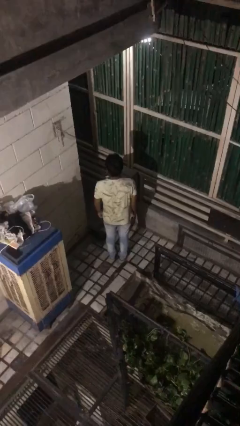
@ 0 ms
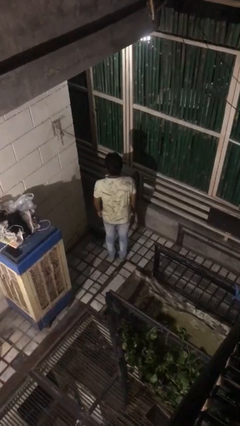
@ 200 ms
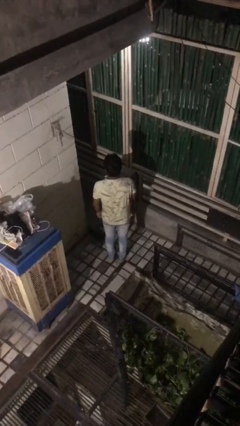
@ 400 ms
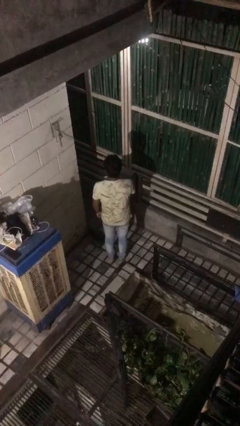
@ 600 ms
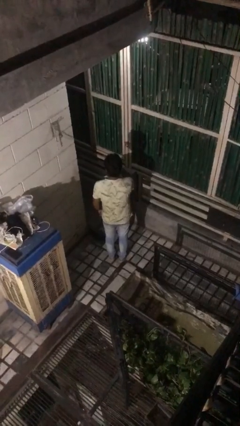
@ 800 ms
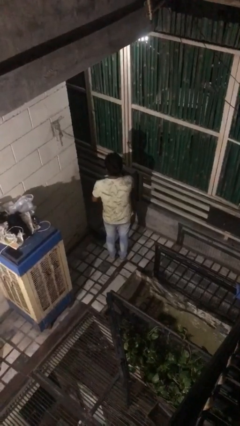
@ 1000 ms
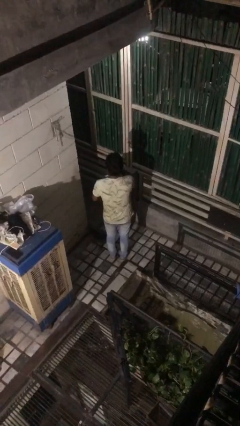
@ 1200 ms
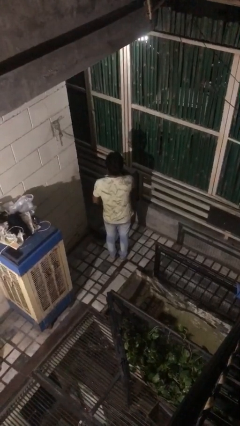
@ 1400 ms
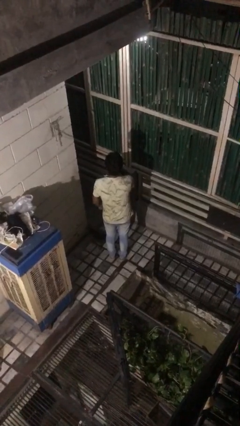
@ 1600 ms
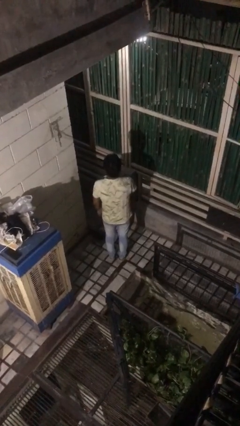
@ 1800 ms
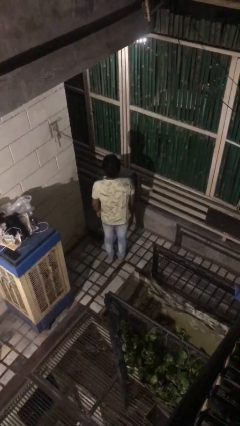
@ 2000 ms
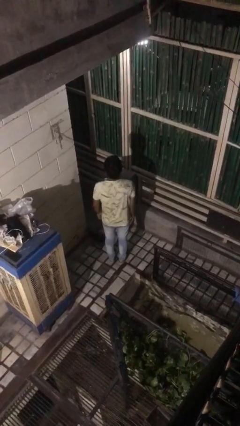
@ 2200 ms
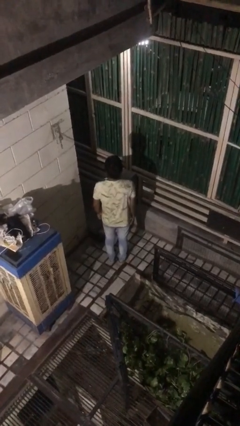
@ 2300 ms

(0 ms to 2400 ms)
person gestures be quiet

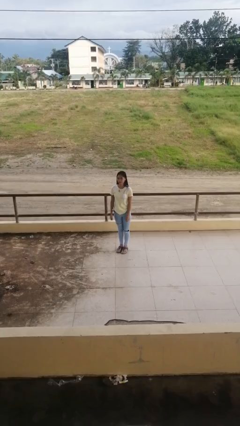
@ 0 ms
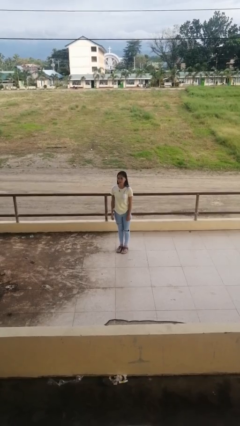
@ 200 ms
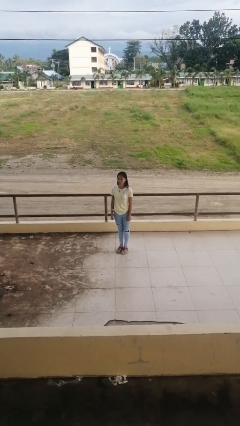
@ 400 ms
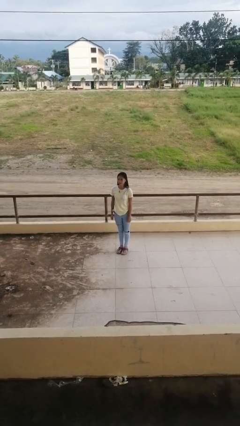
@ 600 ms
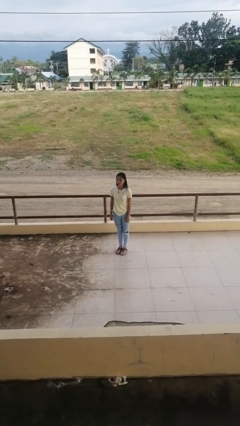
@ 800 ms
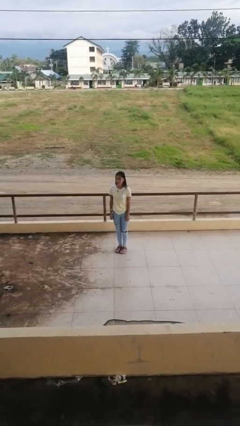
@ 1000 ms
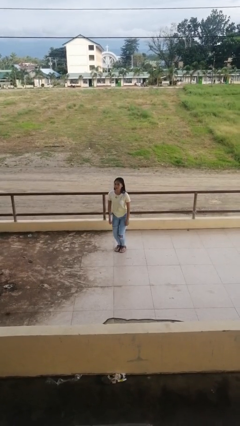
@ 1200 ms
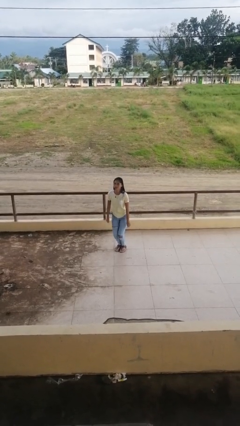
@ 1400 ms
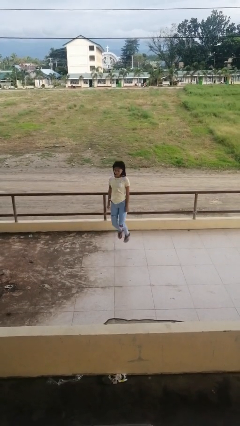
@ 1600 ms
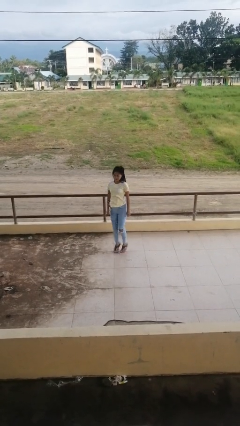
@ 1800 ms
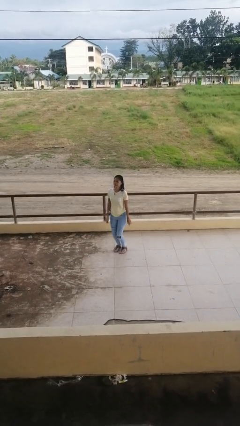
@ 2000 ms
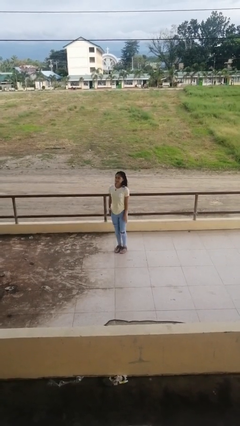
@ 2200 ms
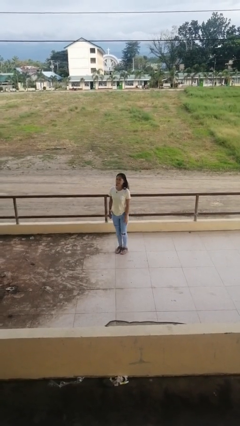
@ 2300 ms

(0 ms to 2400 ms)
person jumps

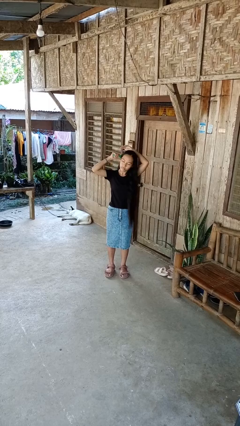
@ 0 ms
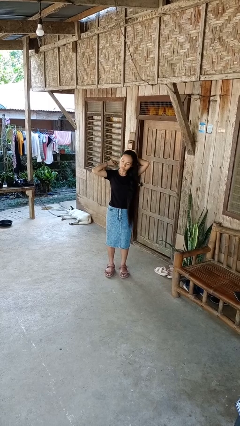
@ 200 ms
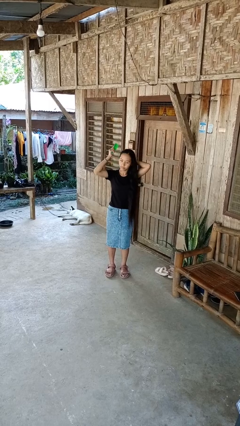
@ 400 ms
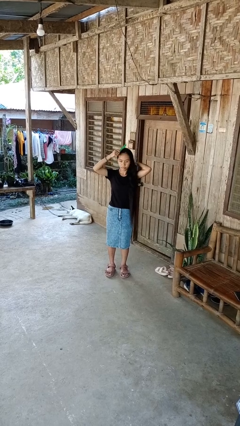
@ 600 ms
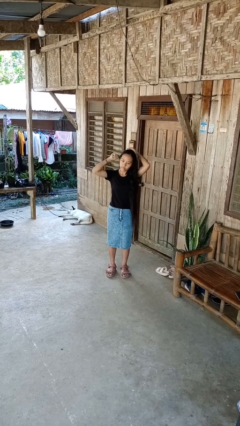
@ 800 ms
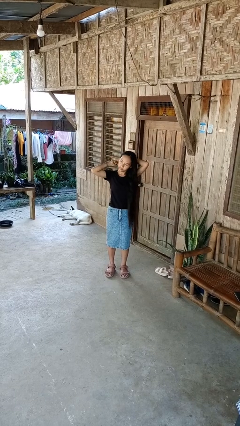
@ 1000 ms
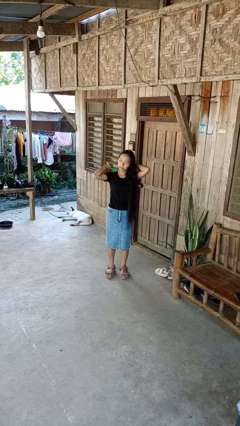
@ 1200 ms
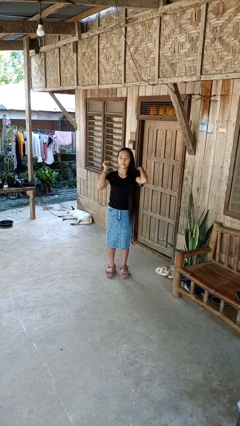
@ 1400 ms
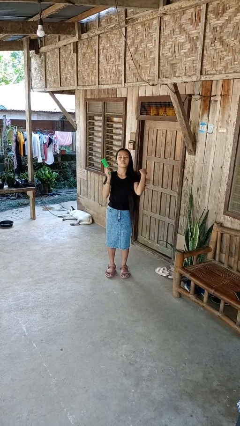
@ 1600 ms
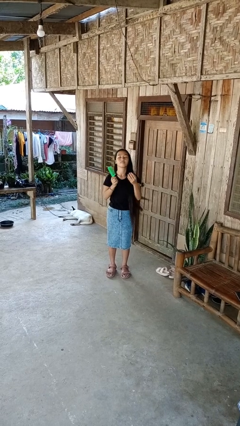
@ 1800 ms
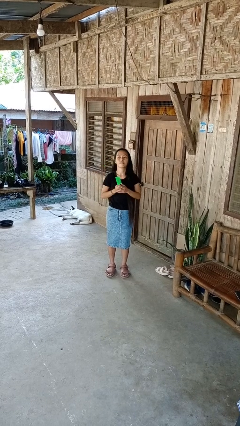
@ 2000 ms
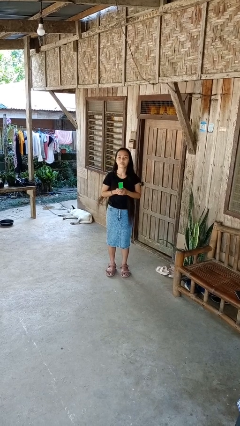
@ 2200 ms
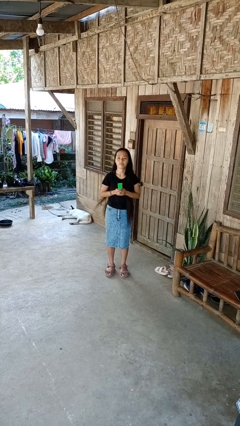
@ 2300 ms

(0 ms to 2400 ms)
person brushes hair

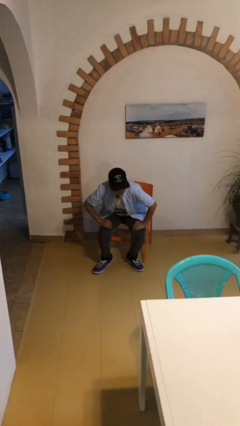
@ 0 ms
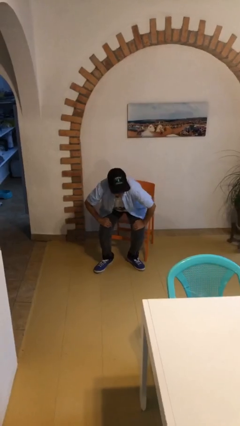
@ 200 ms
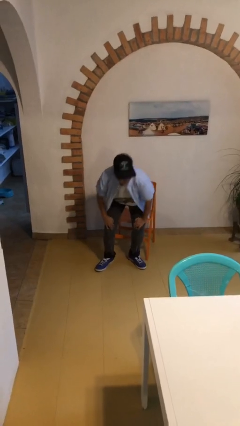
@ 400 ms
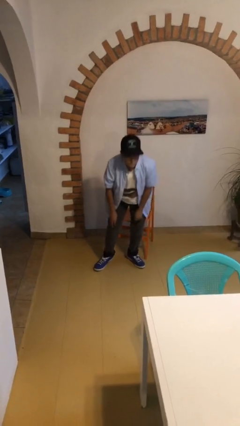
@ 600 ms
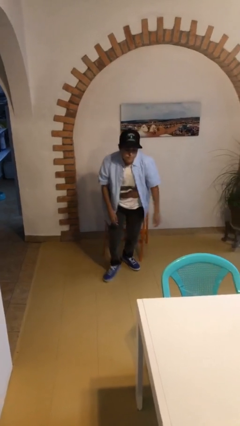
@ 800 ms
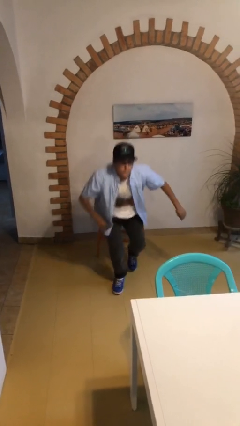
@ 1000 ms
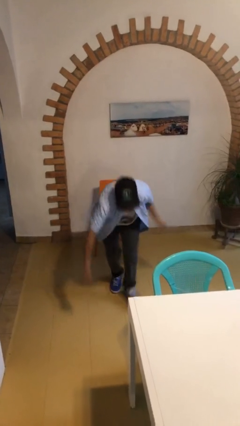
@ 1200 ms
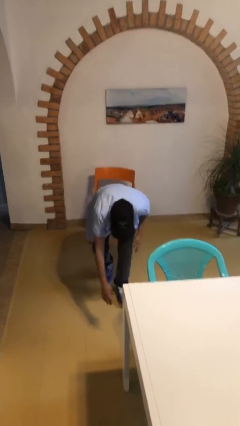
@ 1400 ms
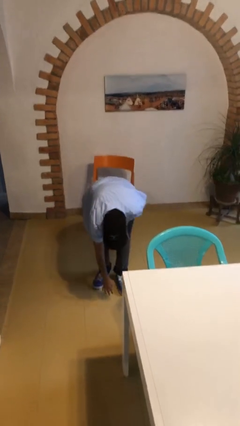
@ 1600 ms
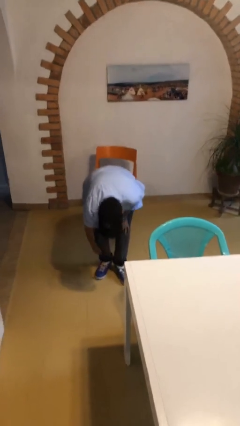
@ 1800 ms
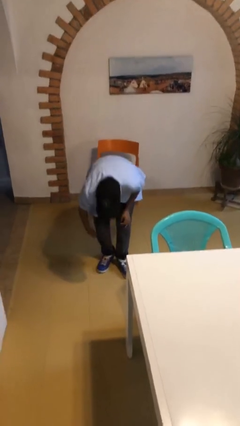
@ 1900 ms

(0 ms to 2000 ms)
person falls from chair

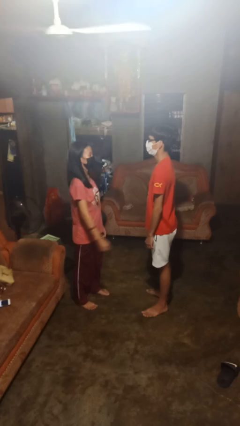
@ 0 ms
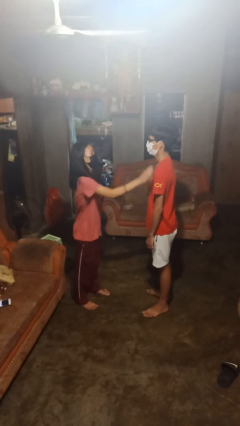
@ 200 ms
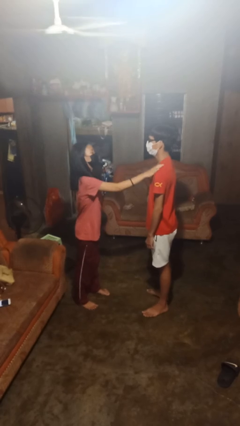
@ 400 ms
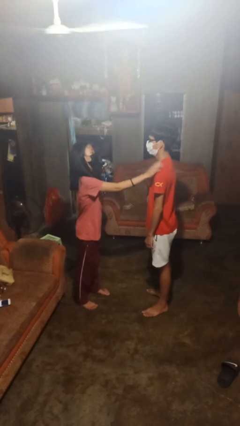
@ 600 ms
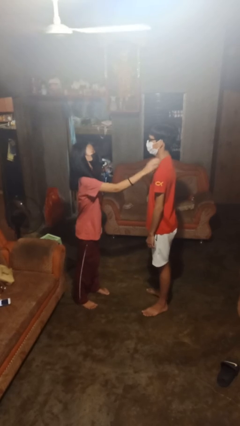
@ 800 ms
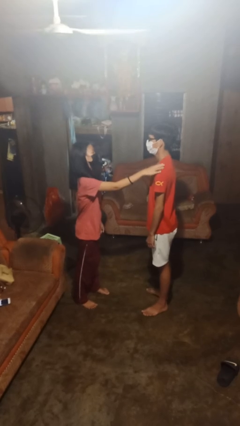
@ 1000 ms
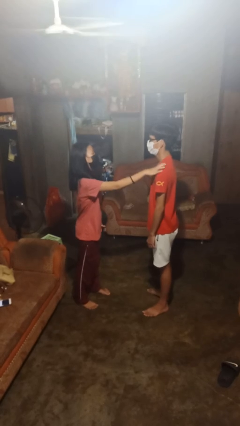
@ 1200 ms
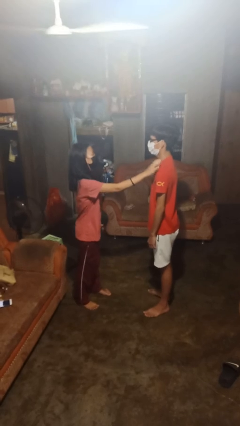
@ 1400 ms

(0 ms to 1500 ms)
person pounds shoulders of person

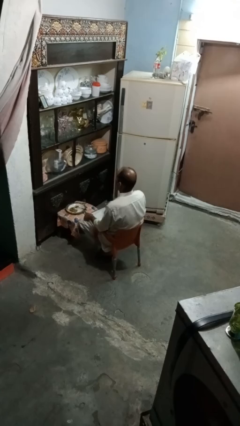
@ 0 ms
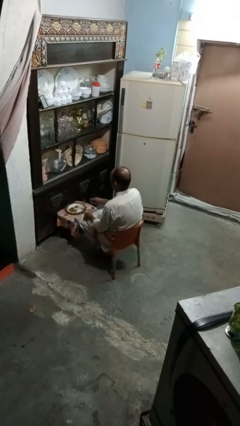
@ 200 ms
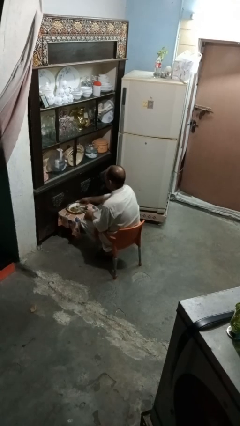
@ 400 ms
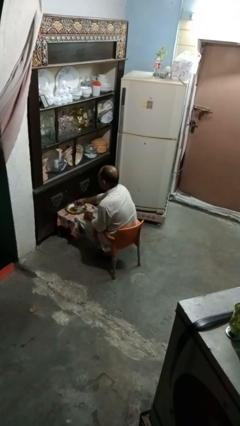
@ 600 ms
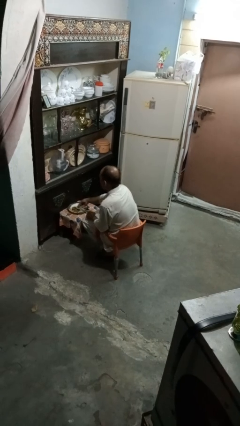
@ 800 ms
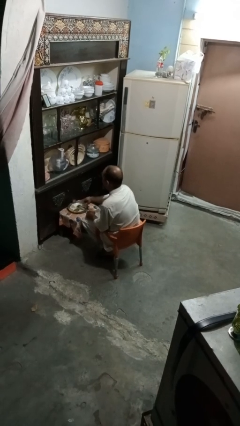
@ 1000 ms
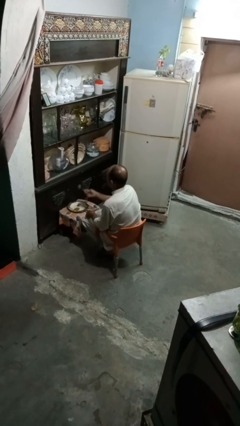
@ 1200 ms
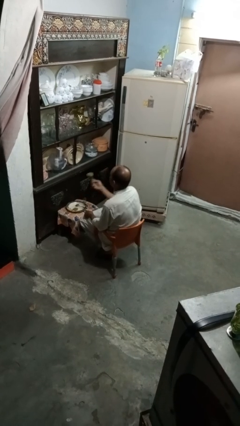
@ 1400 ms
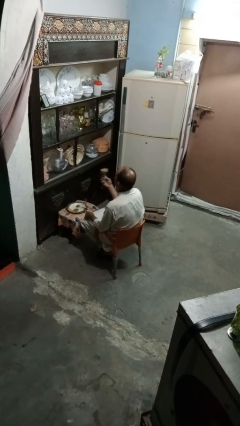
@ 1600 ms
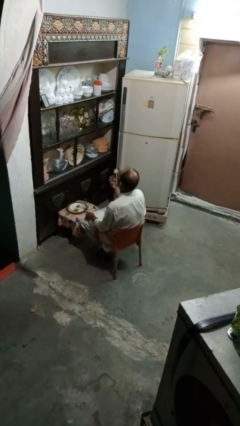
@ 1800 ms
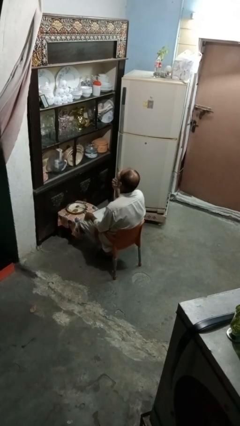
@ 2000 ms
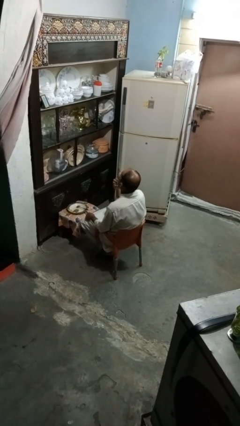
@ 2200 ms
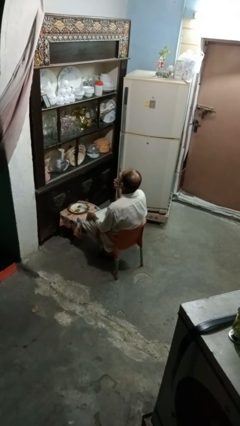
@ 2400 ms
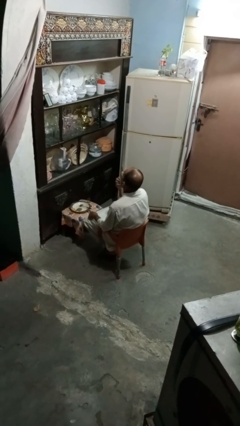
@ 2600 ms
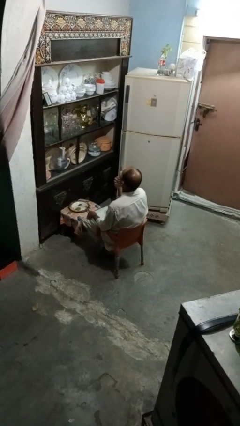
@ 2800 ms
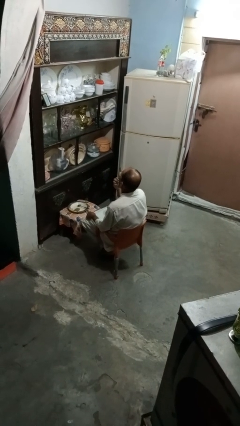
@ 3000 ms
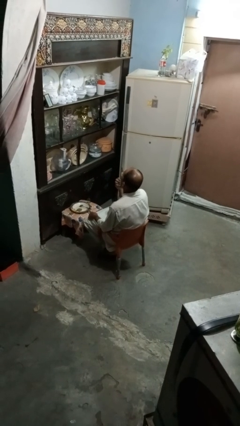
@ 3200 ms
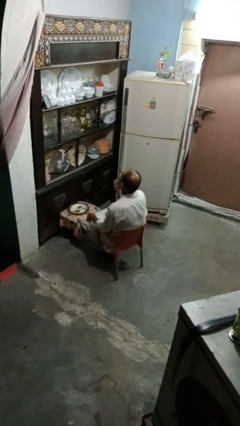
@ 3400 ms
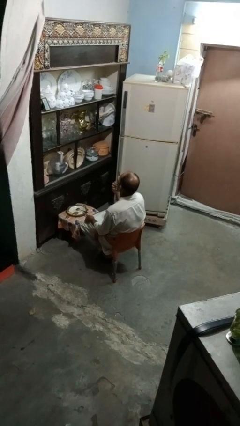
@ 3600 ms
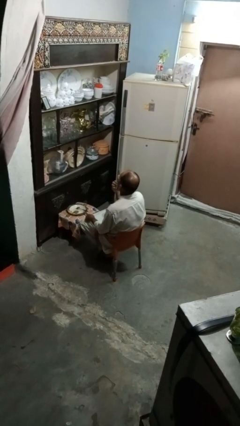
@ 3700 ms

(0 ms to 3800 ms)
person eats with utensil

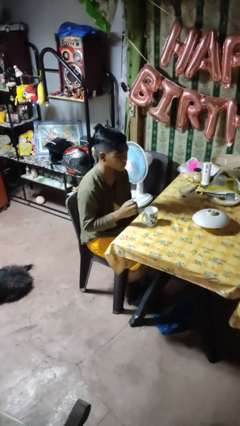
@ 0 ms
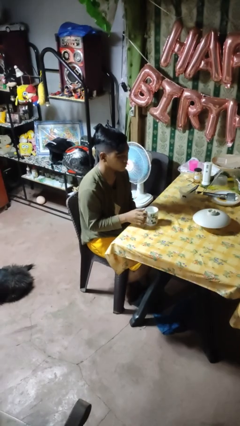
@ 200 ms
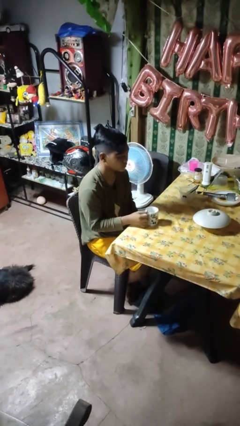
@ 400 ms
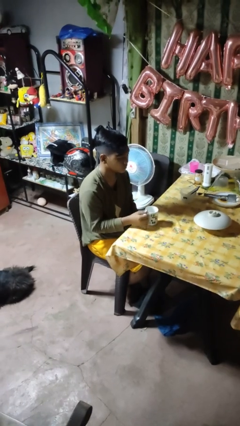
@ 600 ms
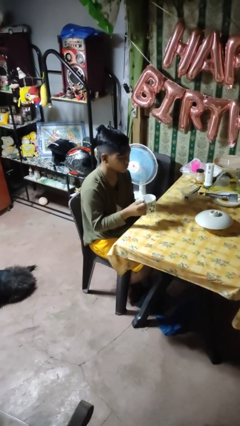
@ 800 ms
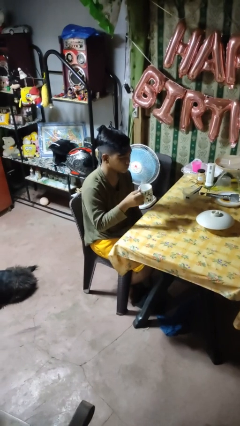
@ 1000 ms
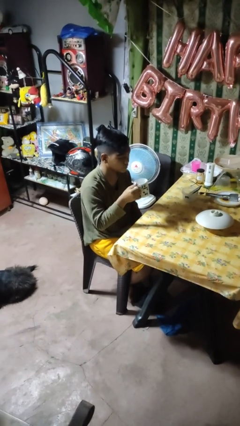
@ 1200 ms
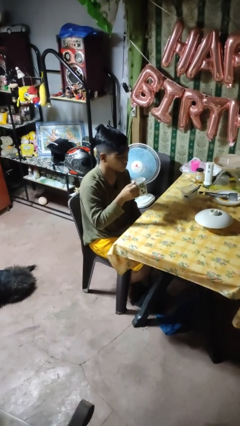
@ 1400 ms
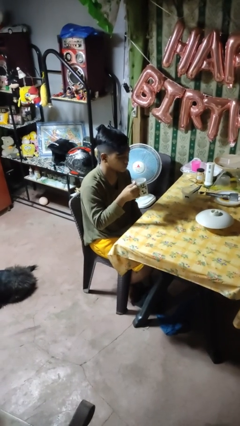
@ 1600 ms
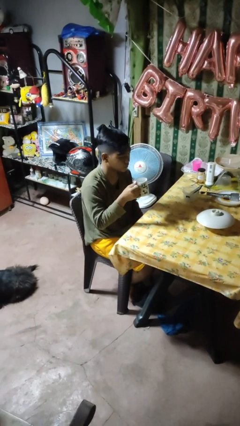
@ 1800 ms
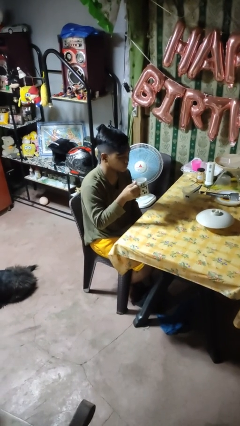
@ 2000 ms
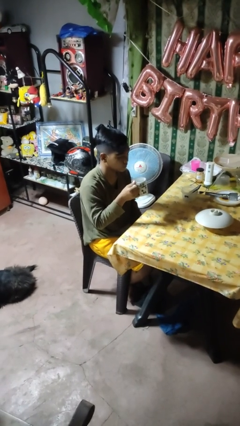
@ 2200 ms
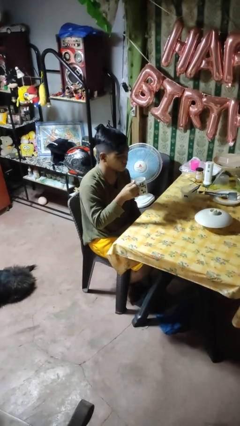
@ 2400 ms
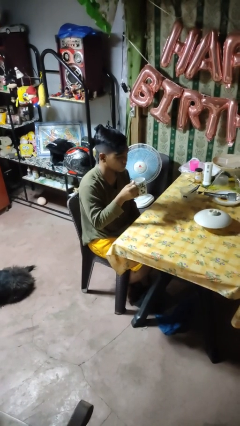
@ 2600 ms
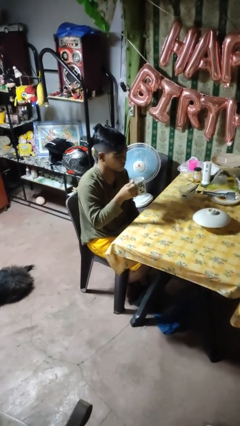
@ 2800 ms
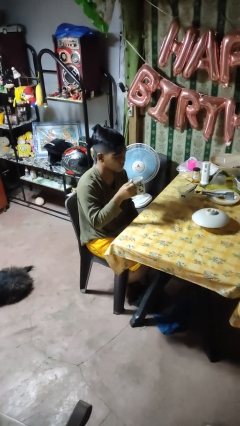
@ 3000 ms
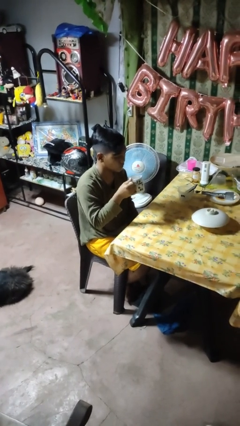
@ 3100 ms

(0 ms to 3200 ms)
person picks up object from table
